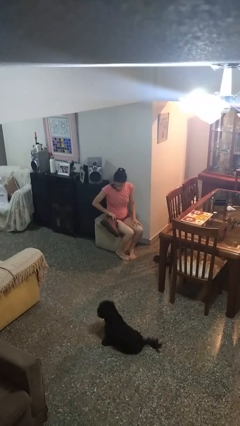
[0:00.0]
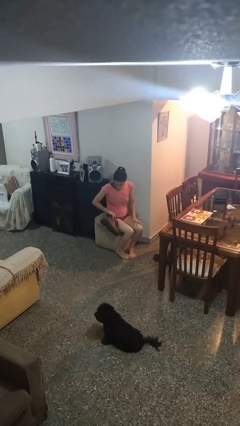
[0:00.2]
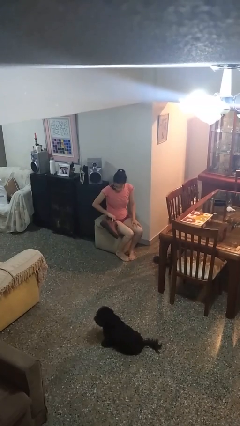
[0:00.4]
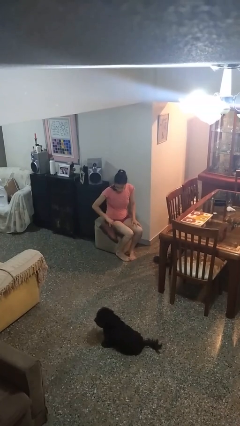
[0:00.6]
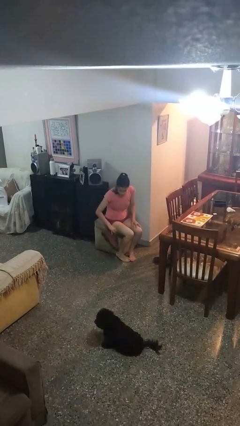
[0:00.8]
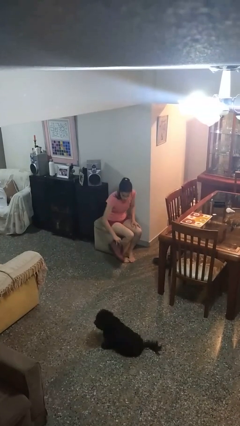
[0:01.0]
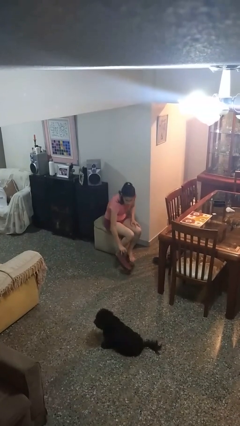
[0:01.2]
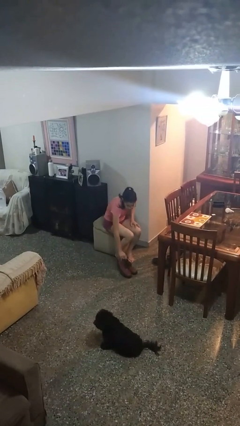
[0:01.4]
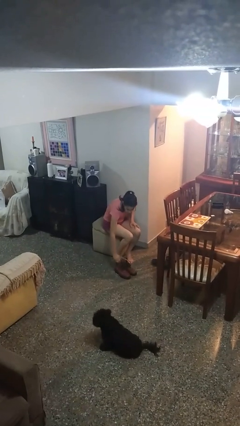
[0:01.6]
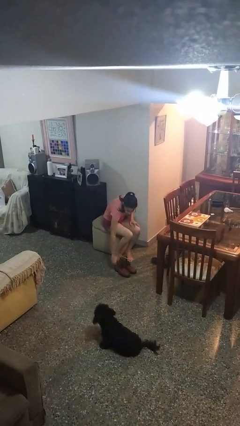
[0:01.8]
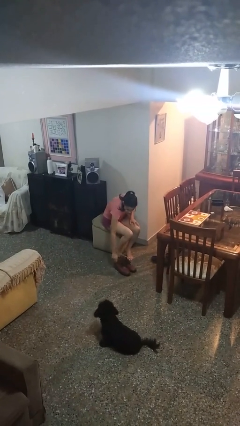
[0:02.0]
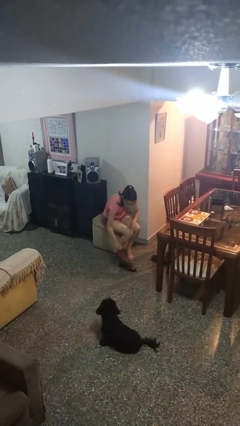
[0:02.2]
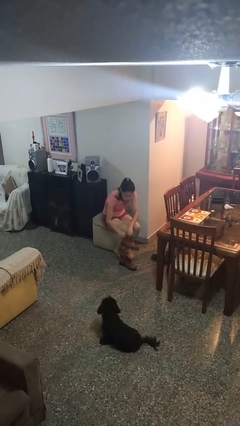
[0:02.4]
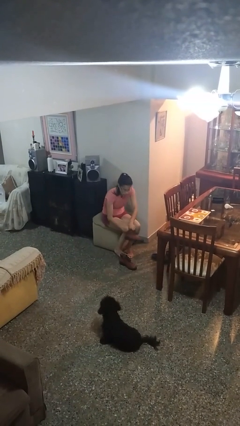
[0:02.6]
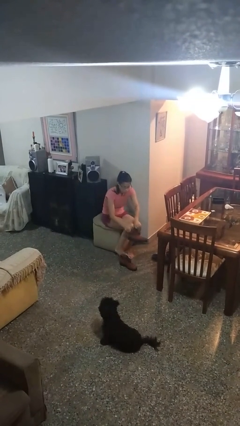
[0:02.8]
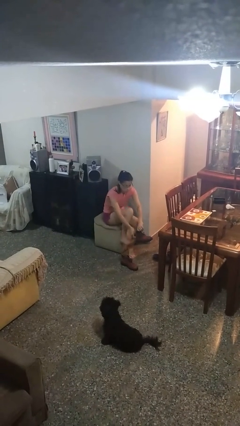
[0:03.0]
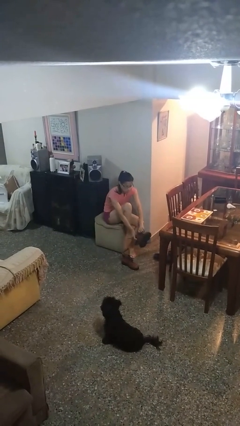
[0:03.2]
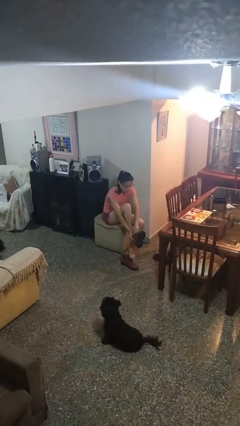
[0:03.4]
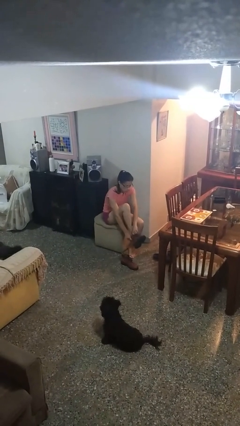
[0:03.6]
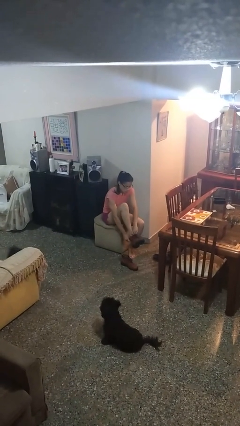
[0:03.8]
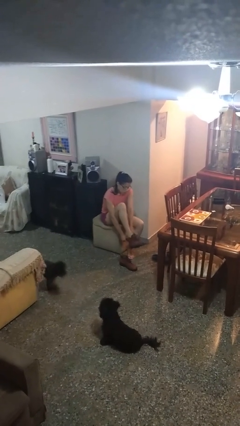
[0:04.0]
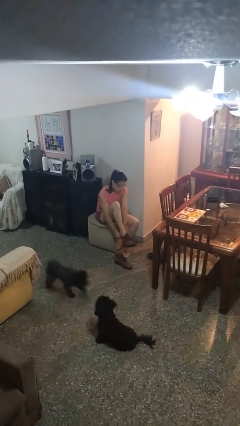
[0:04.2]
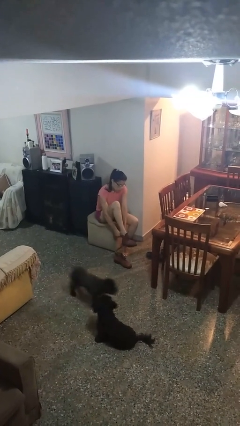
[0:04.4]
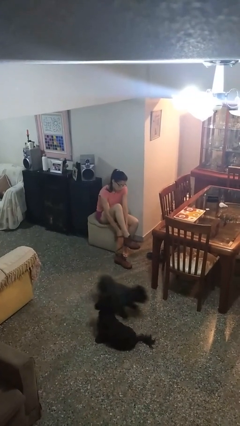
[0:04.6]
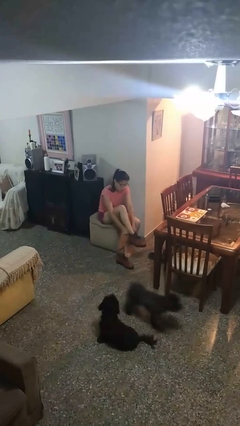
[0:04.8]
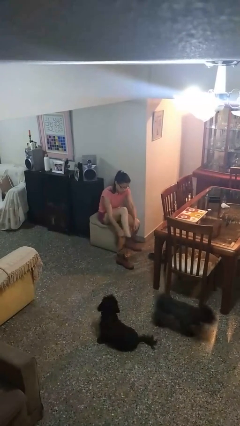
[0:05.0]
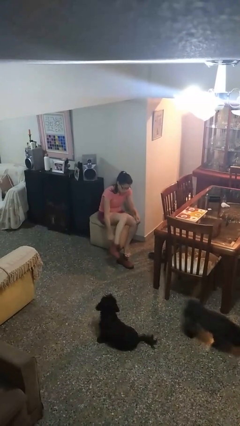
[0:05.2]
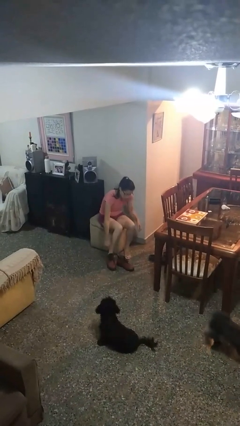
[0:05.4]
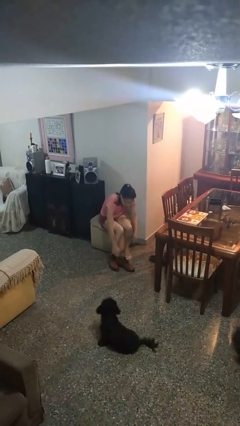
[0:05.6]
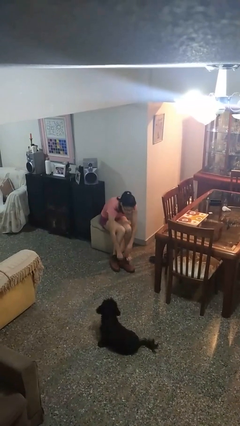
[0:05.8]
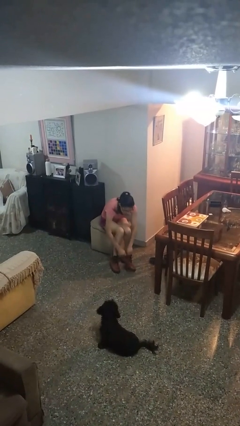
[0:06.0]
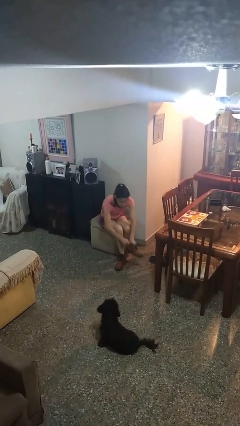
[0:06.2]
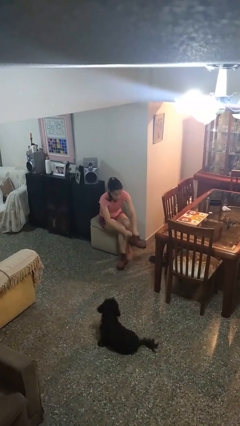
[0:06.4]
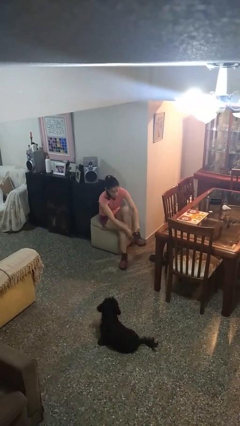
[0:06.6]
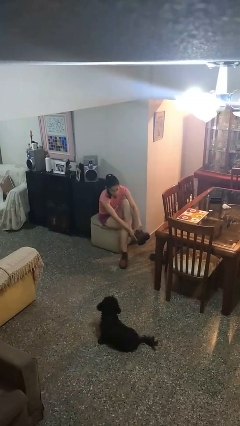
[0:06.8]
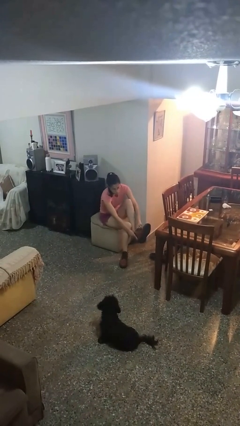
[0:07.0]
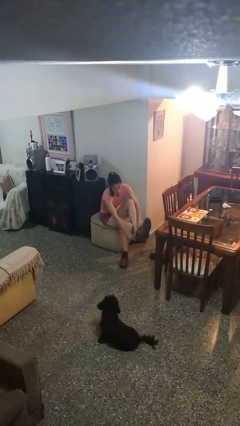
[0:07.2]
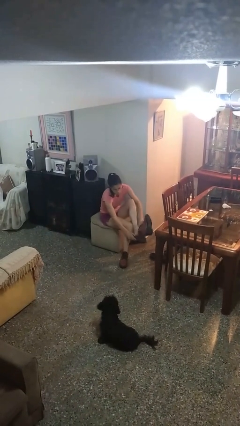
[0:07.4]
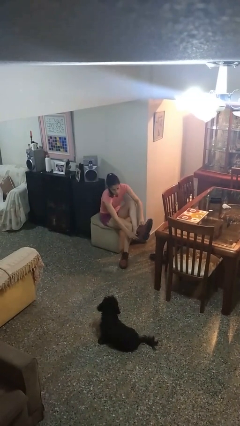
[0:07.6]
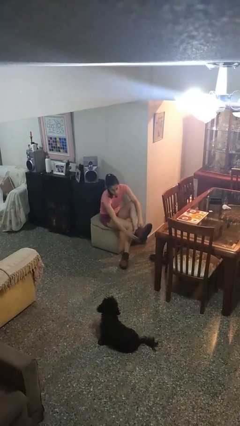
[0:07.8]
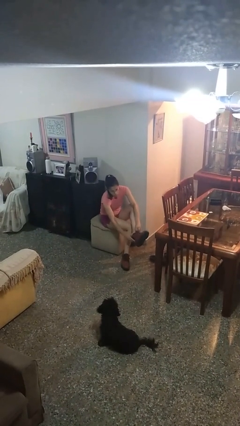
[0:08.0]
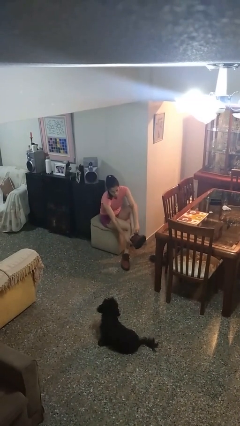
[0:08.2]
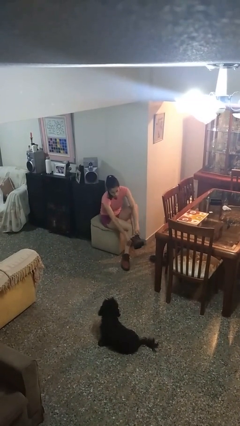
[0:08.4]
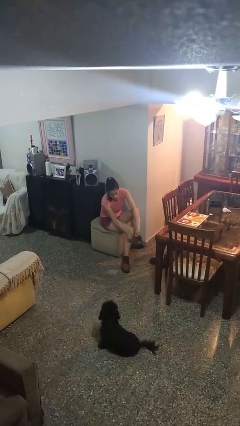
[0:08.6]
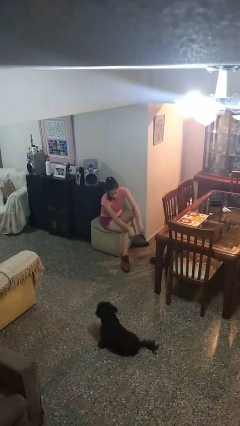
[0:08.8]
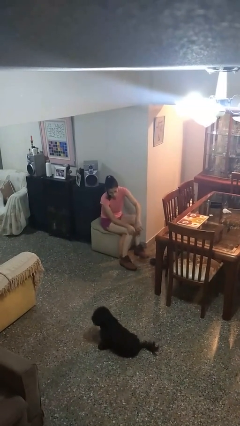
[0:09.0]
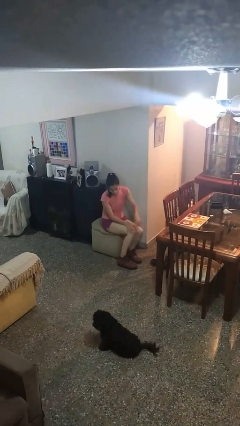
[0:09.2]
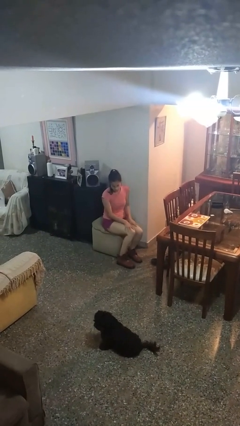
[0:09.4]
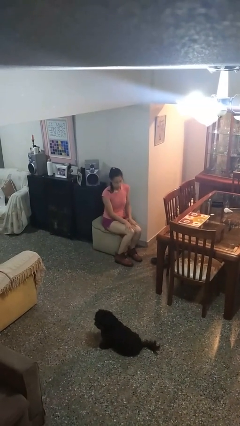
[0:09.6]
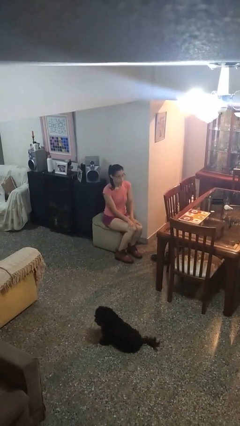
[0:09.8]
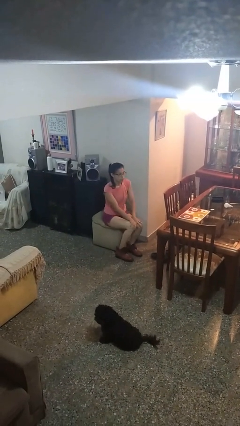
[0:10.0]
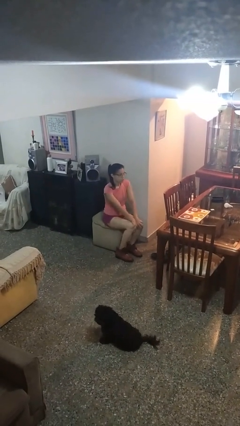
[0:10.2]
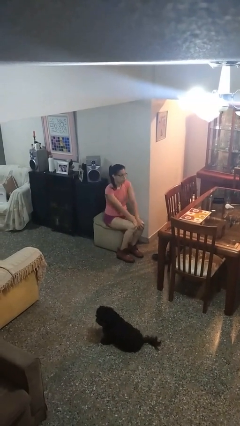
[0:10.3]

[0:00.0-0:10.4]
person puts on boots

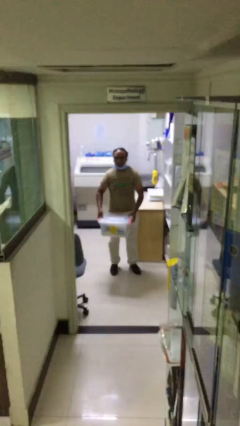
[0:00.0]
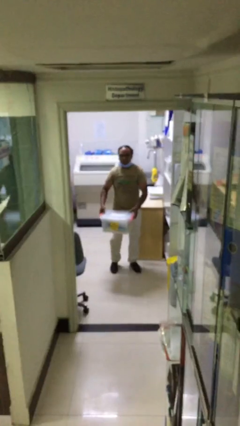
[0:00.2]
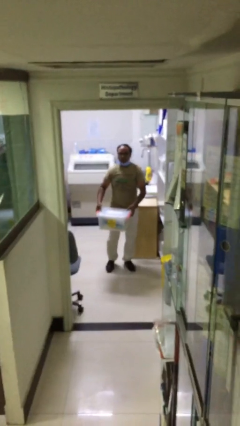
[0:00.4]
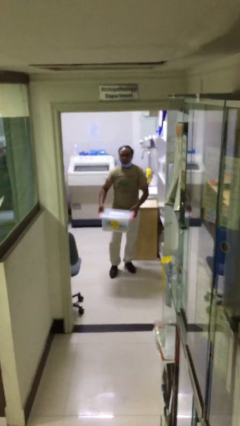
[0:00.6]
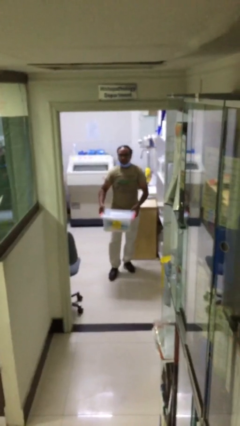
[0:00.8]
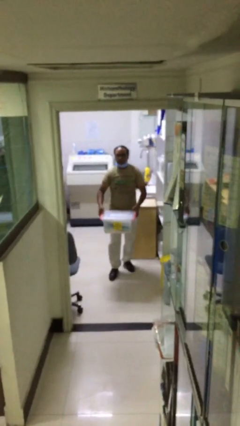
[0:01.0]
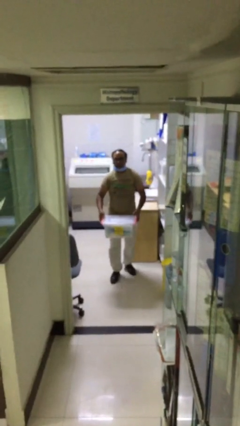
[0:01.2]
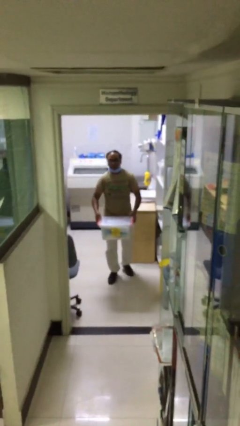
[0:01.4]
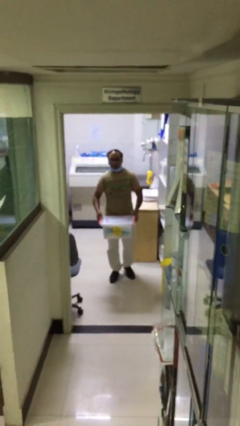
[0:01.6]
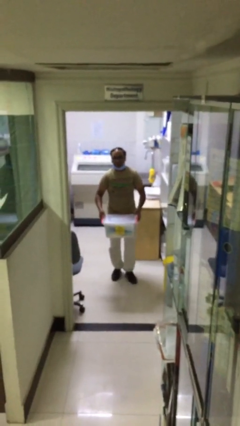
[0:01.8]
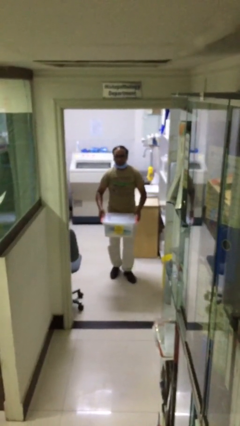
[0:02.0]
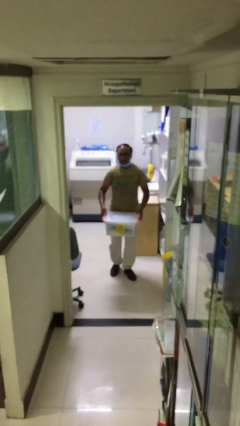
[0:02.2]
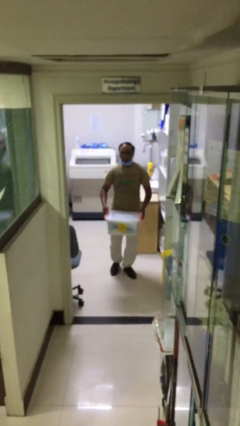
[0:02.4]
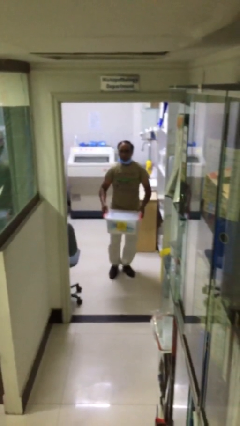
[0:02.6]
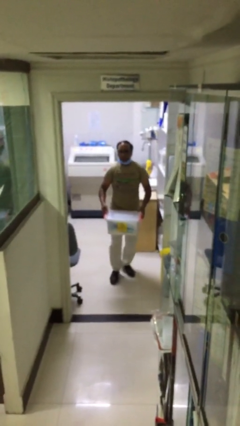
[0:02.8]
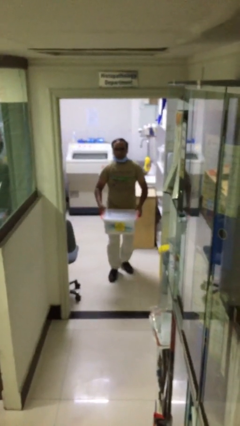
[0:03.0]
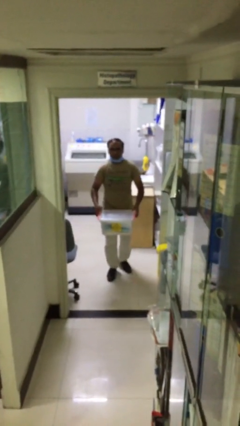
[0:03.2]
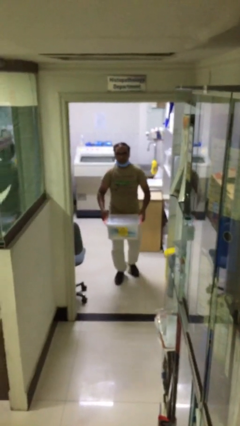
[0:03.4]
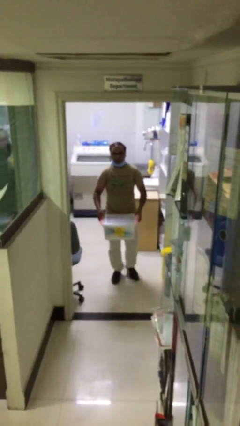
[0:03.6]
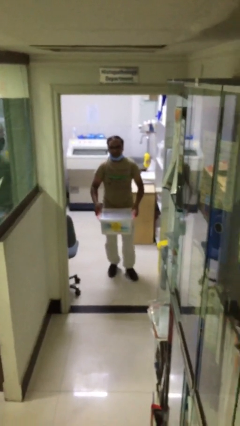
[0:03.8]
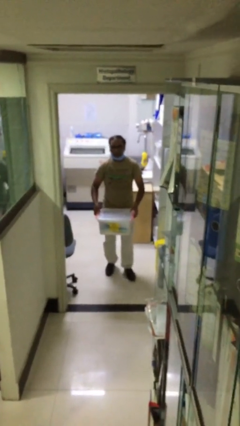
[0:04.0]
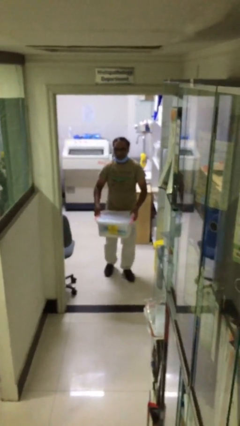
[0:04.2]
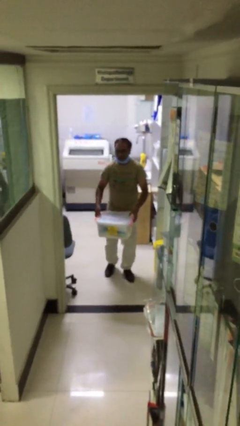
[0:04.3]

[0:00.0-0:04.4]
person carries heavy object

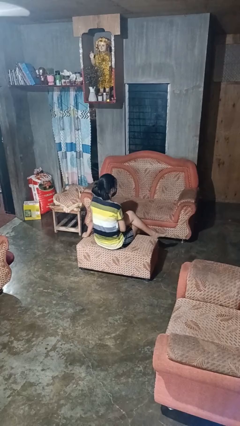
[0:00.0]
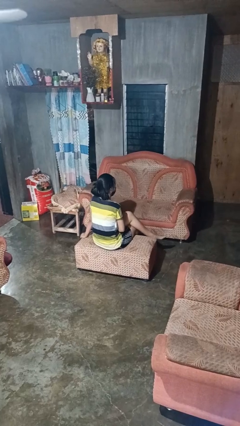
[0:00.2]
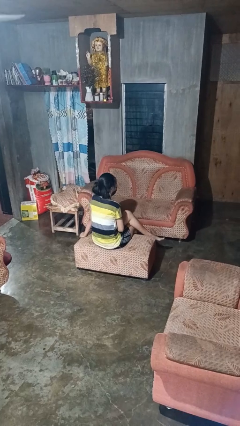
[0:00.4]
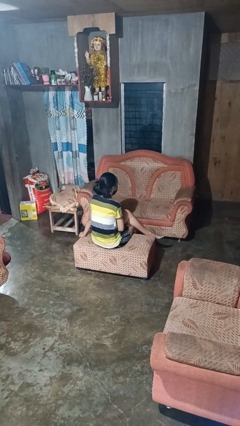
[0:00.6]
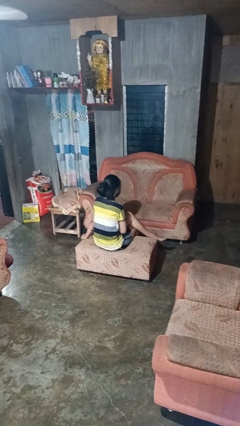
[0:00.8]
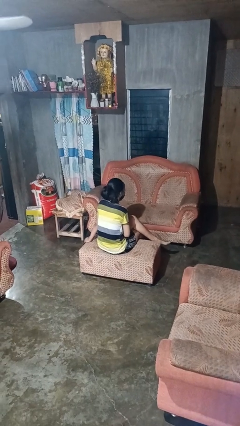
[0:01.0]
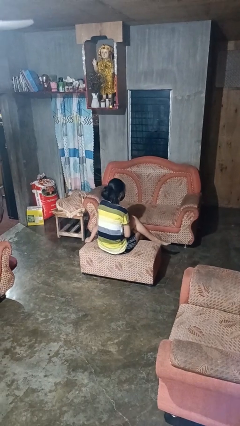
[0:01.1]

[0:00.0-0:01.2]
person crosses legs

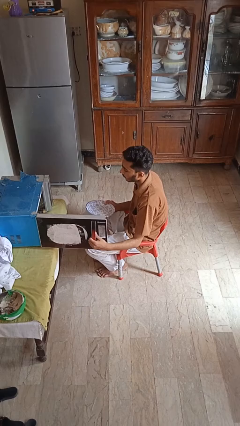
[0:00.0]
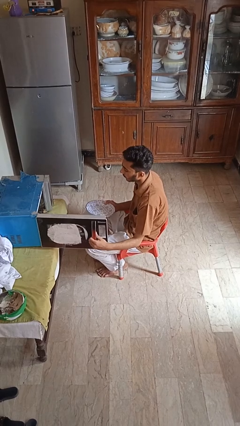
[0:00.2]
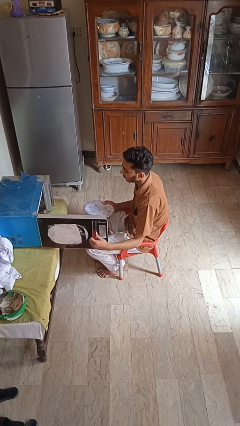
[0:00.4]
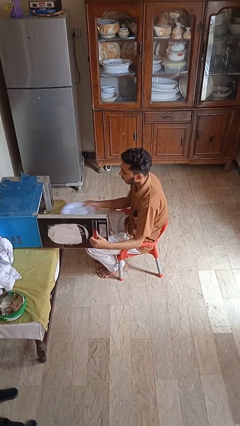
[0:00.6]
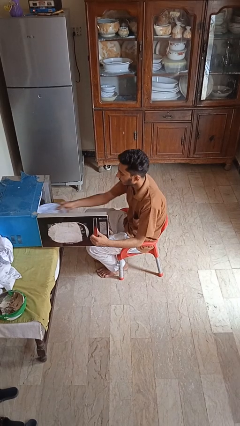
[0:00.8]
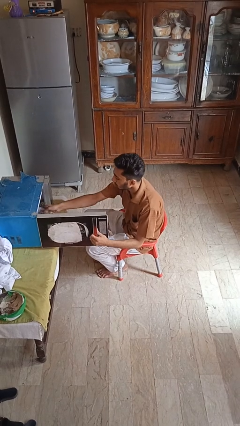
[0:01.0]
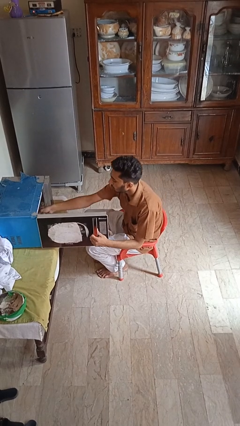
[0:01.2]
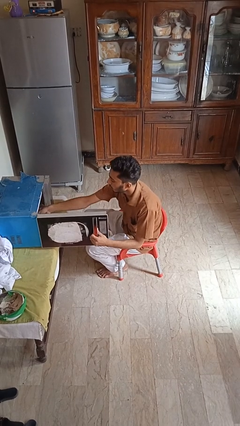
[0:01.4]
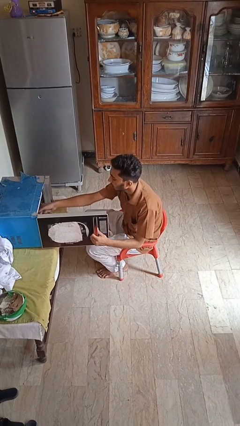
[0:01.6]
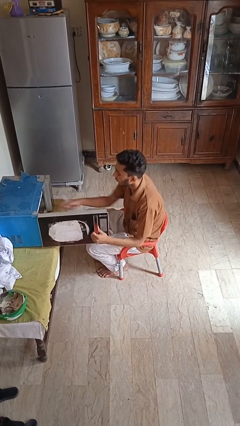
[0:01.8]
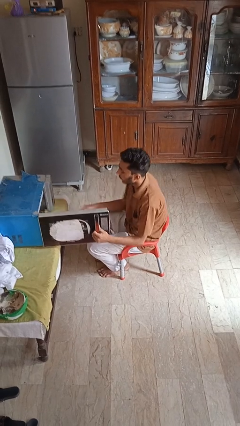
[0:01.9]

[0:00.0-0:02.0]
person puts object into microwave
